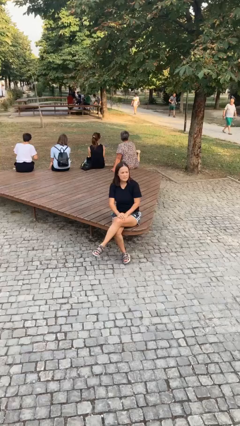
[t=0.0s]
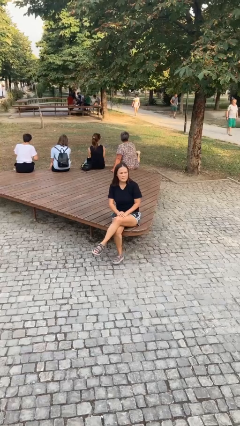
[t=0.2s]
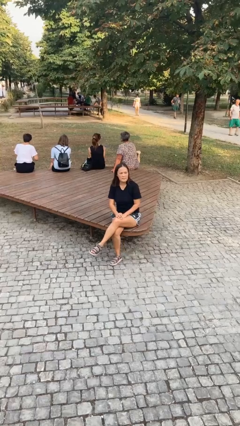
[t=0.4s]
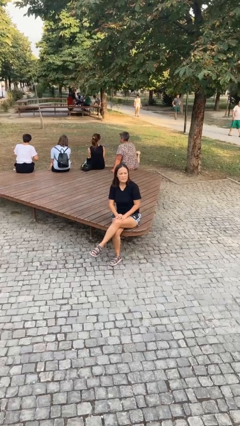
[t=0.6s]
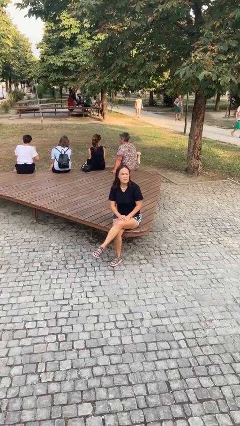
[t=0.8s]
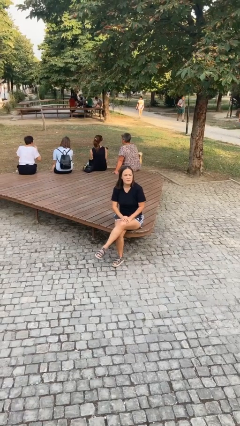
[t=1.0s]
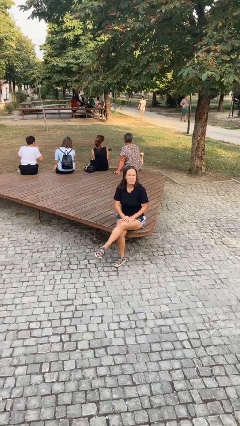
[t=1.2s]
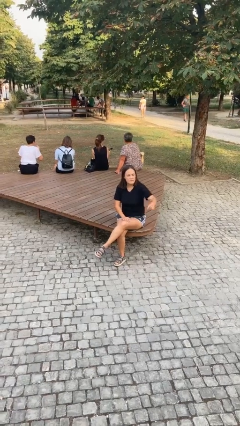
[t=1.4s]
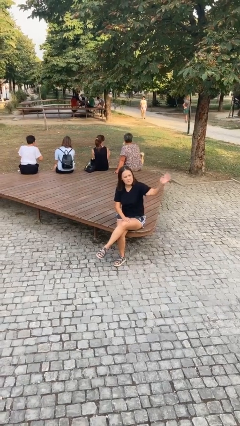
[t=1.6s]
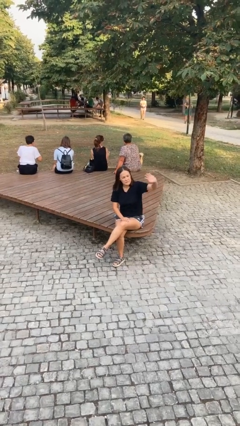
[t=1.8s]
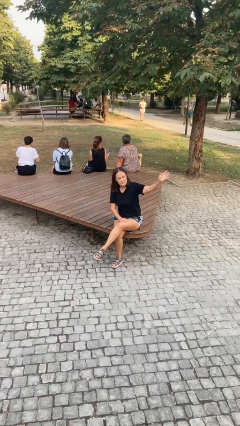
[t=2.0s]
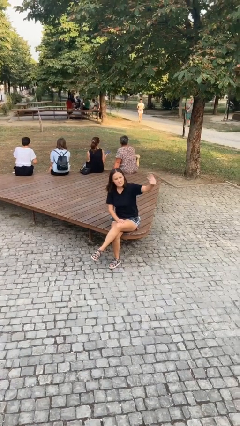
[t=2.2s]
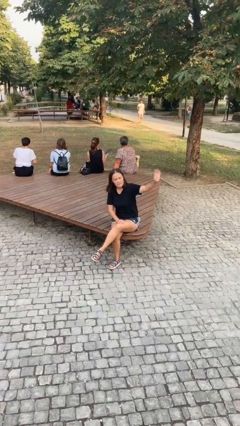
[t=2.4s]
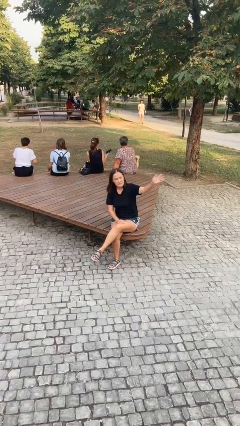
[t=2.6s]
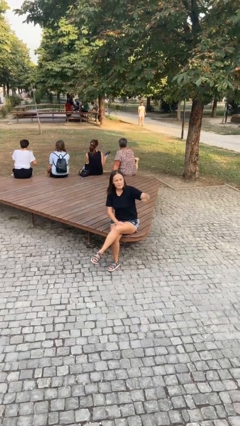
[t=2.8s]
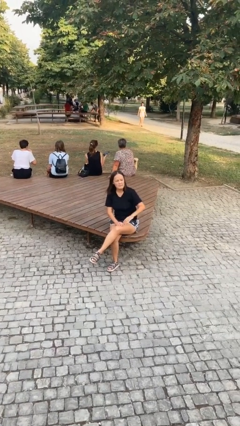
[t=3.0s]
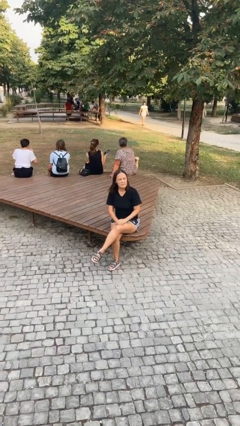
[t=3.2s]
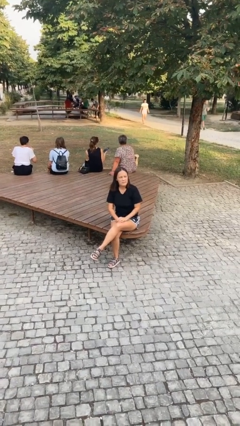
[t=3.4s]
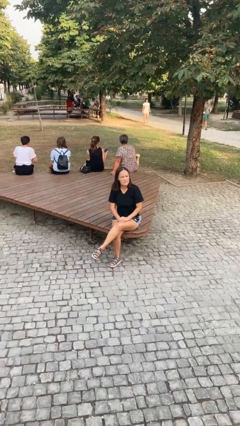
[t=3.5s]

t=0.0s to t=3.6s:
person waves at person

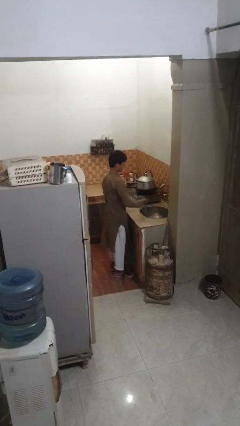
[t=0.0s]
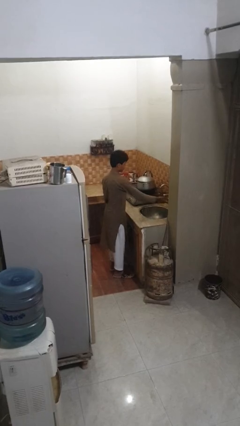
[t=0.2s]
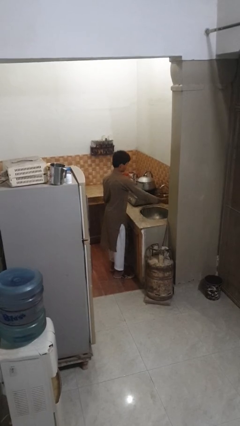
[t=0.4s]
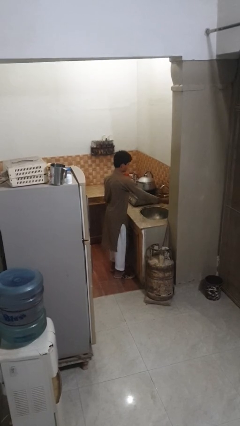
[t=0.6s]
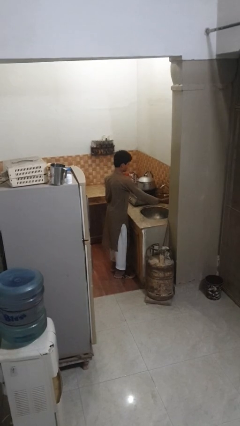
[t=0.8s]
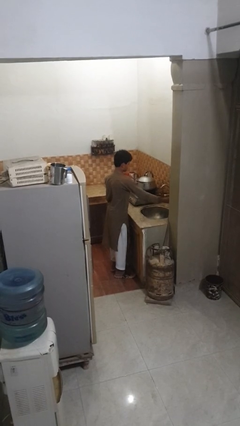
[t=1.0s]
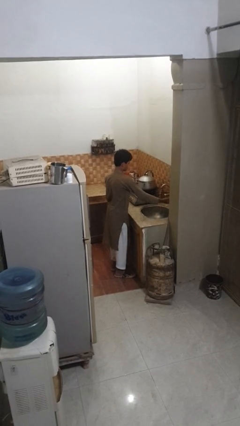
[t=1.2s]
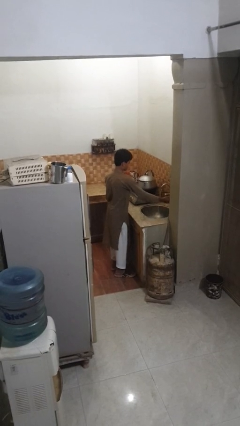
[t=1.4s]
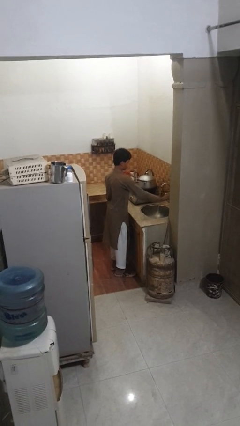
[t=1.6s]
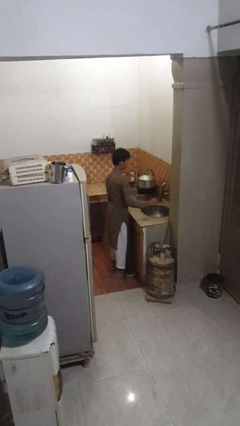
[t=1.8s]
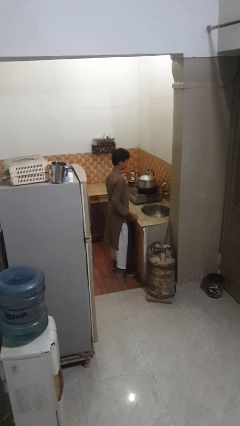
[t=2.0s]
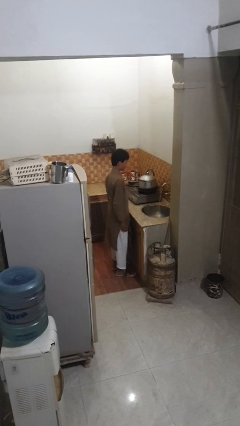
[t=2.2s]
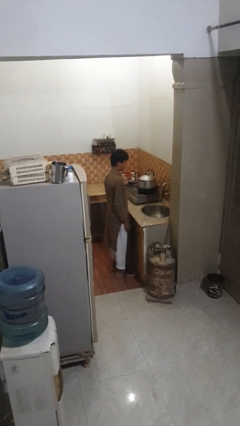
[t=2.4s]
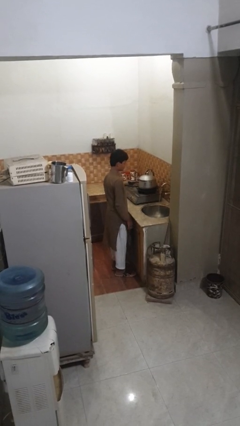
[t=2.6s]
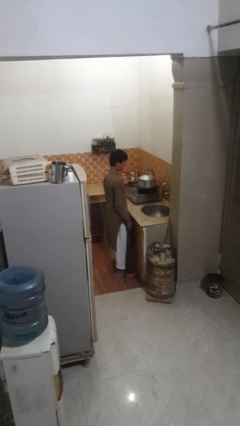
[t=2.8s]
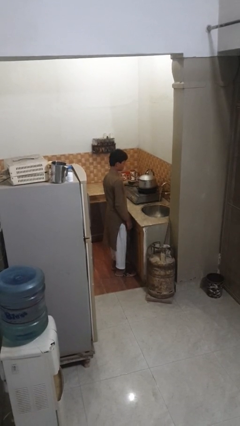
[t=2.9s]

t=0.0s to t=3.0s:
person turns on faucet

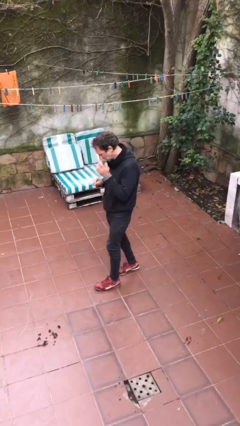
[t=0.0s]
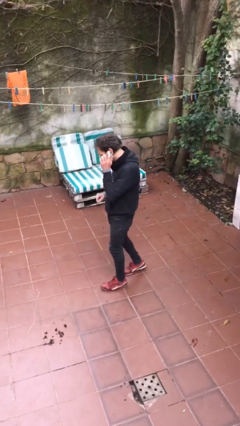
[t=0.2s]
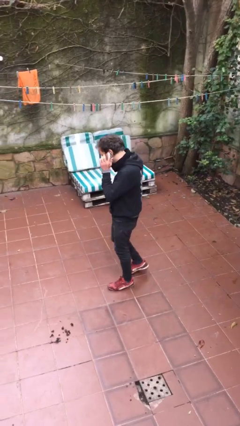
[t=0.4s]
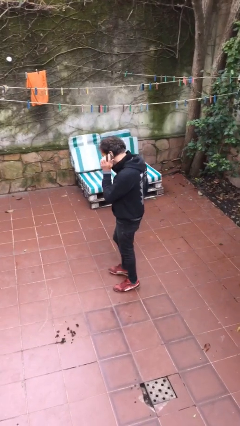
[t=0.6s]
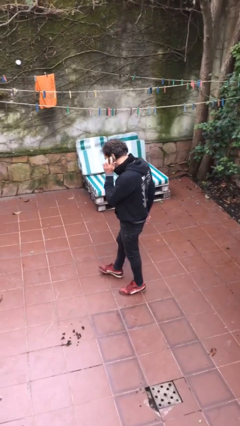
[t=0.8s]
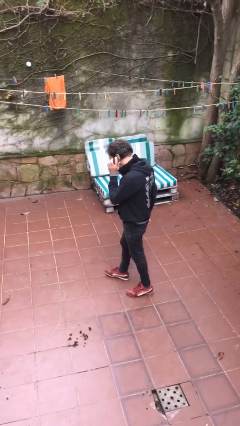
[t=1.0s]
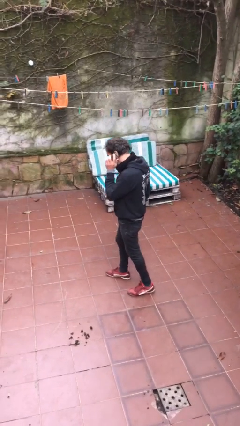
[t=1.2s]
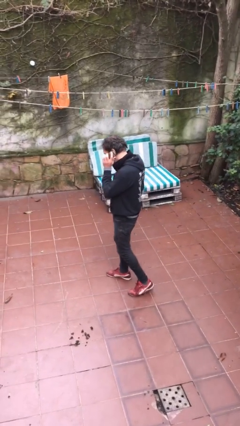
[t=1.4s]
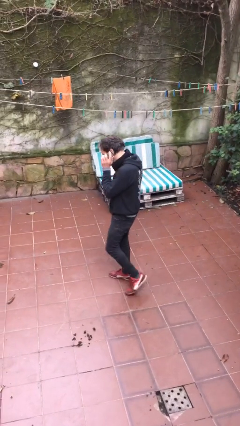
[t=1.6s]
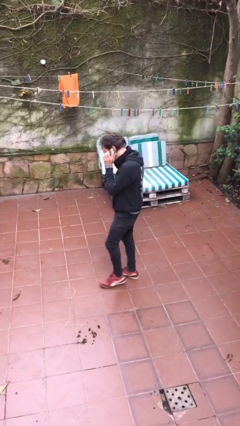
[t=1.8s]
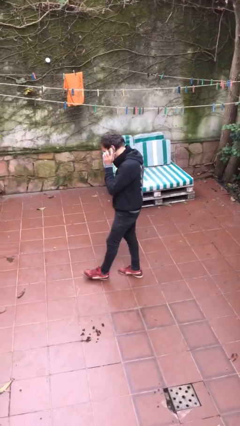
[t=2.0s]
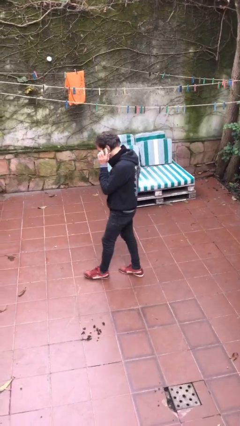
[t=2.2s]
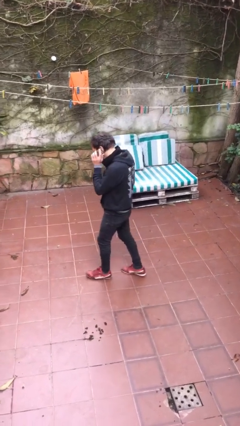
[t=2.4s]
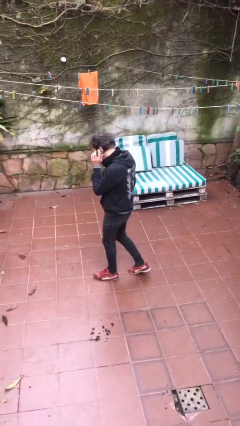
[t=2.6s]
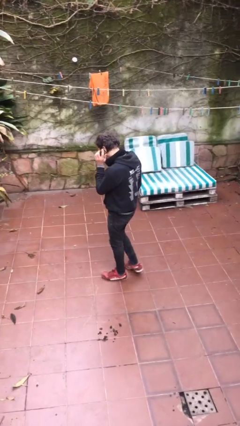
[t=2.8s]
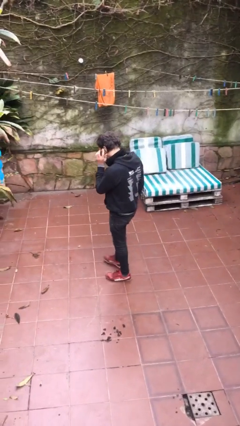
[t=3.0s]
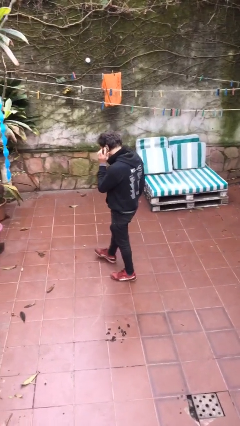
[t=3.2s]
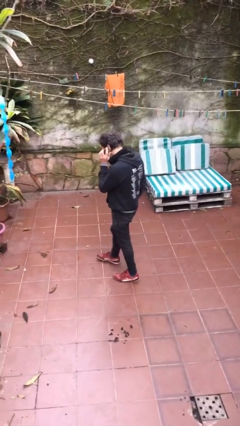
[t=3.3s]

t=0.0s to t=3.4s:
person talks on phone

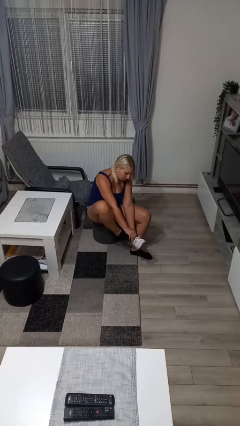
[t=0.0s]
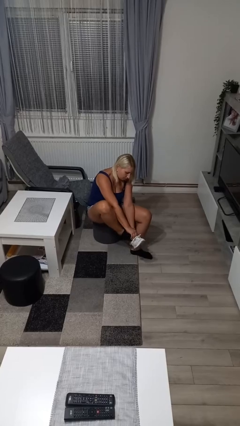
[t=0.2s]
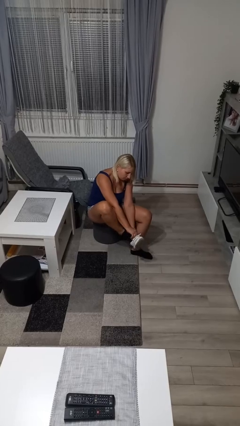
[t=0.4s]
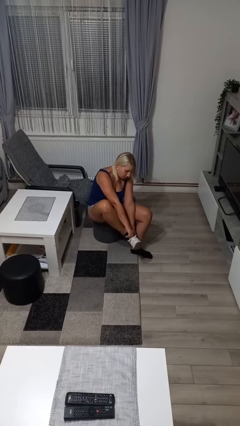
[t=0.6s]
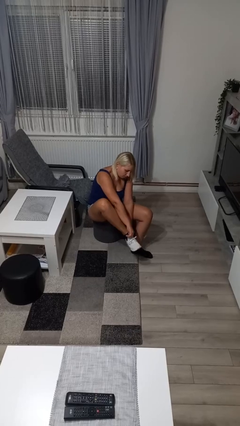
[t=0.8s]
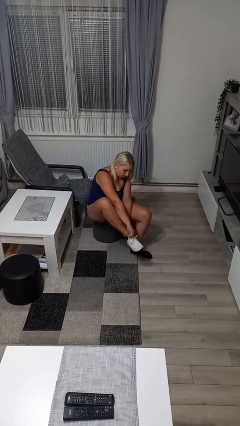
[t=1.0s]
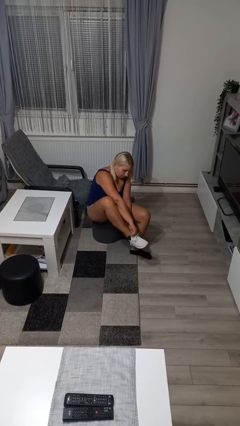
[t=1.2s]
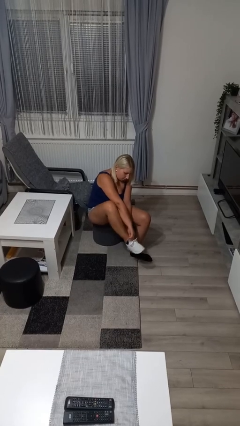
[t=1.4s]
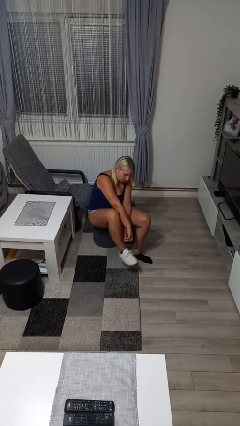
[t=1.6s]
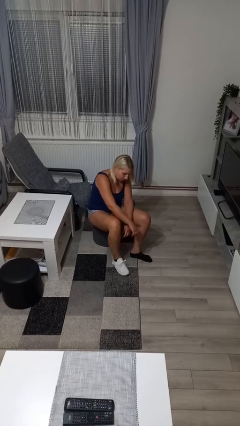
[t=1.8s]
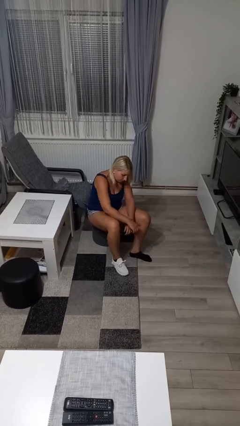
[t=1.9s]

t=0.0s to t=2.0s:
person puts on shoes

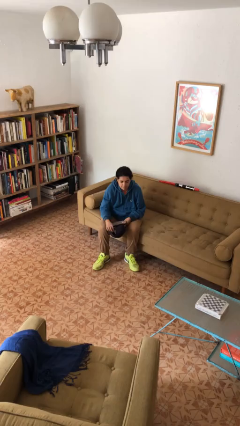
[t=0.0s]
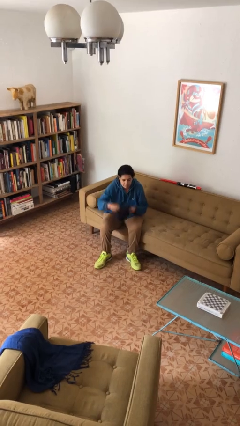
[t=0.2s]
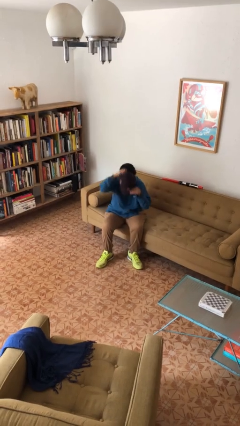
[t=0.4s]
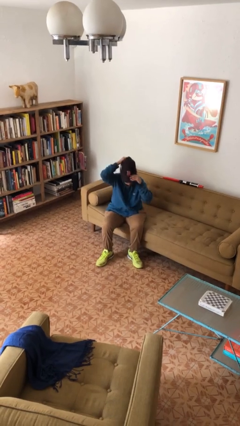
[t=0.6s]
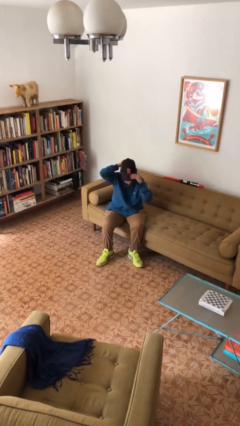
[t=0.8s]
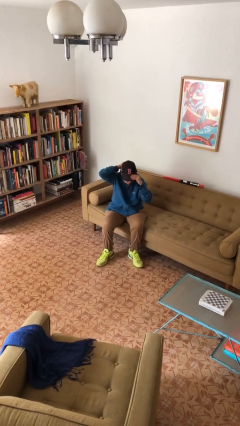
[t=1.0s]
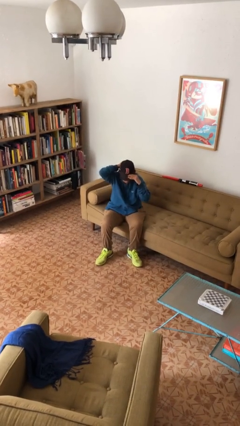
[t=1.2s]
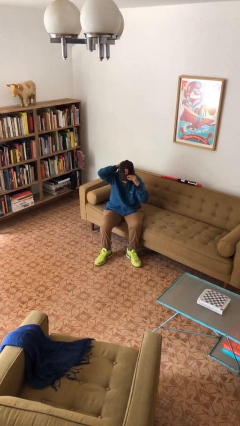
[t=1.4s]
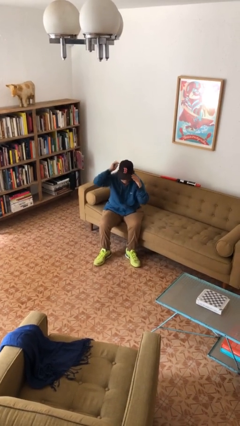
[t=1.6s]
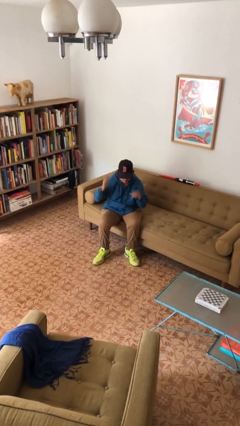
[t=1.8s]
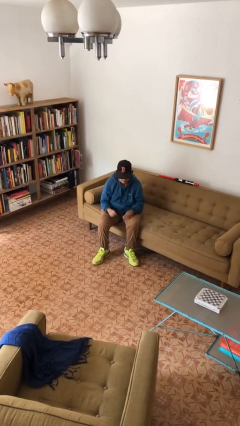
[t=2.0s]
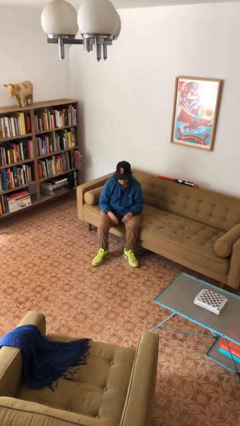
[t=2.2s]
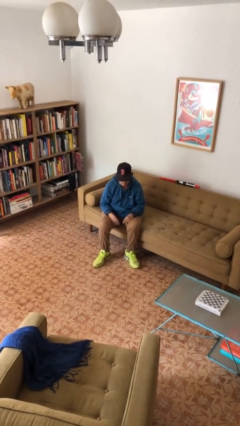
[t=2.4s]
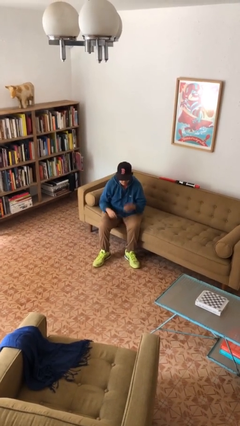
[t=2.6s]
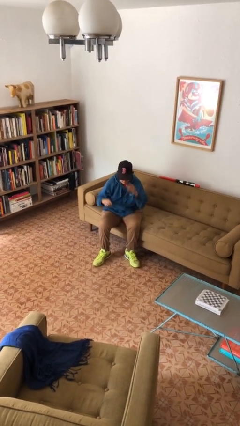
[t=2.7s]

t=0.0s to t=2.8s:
person puts on hat

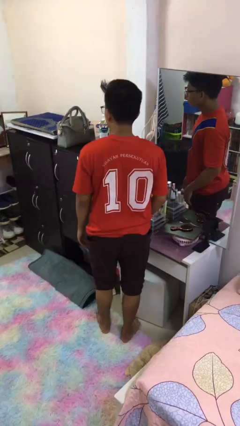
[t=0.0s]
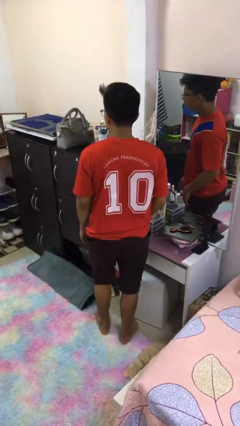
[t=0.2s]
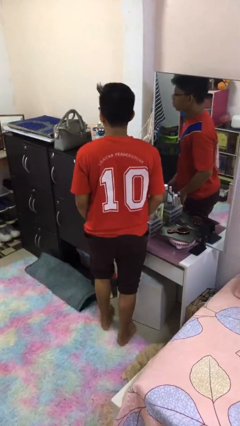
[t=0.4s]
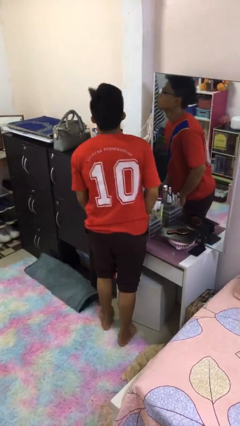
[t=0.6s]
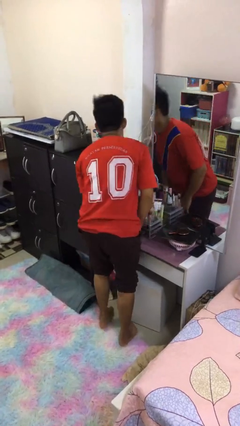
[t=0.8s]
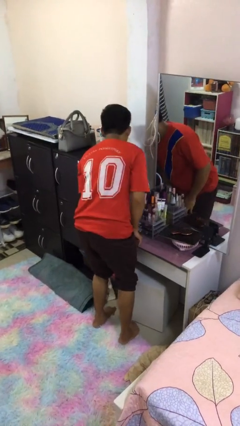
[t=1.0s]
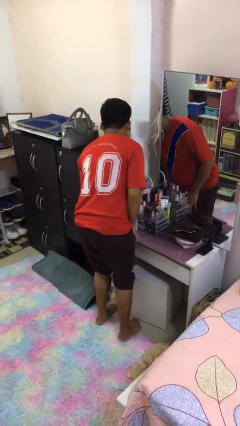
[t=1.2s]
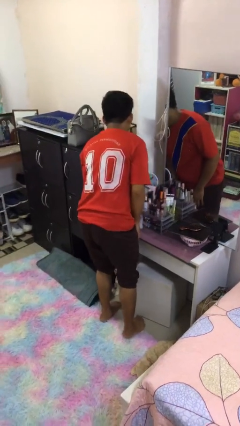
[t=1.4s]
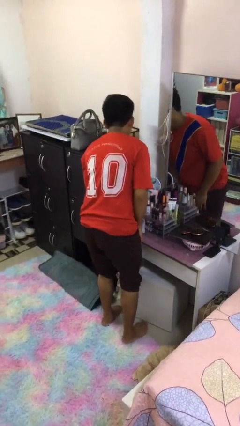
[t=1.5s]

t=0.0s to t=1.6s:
person bumps into table

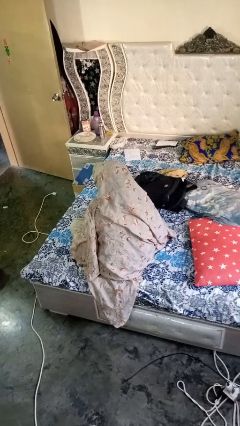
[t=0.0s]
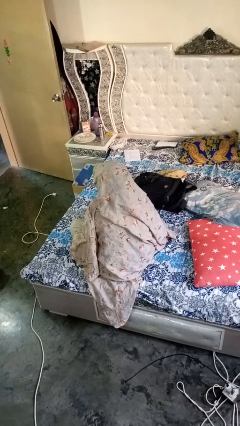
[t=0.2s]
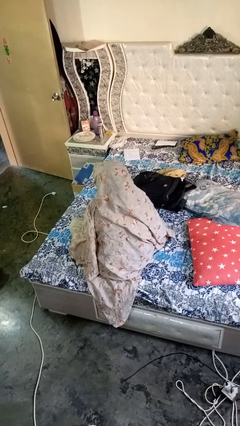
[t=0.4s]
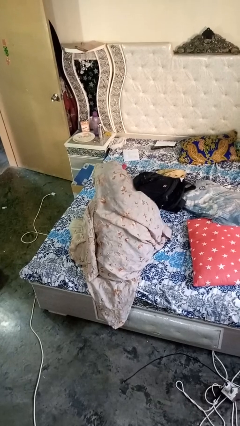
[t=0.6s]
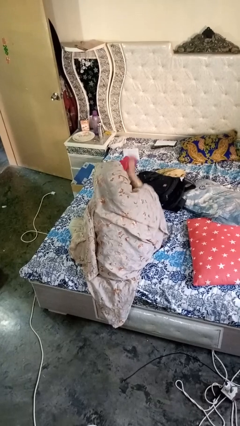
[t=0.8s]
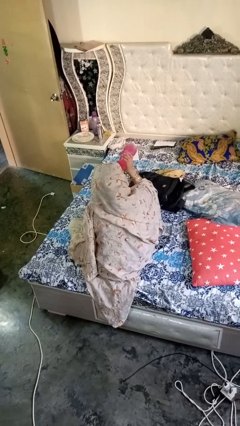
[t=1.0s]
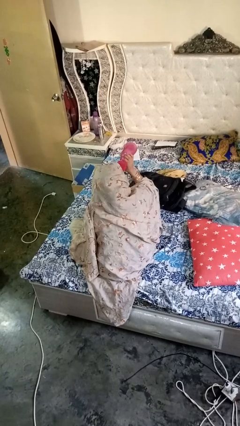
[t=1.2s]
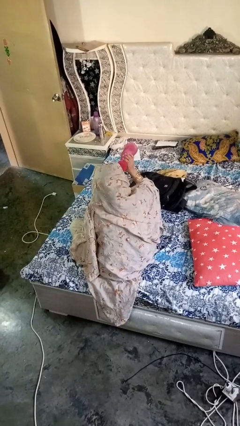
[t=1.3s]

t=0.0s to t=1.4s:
person drinks from bottle
